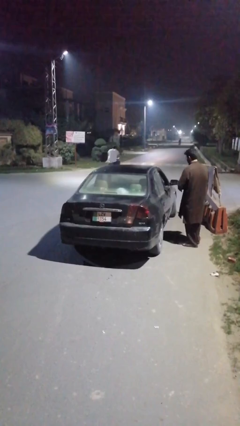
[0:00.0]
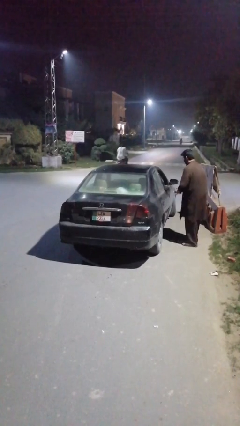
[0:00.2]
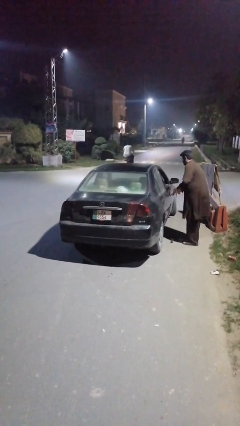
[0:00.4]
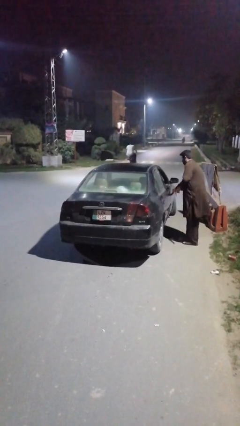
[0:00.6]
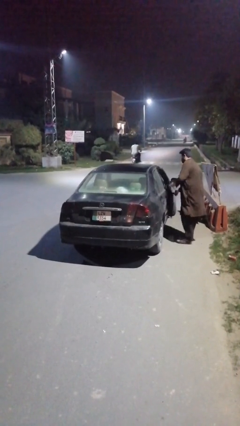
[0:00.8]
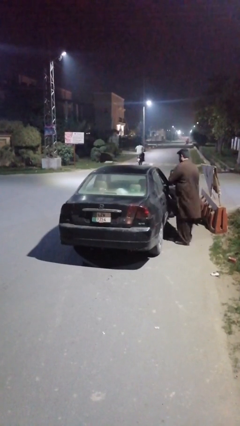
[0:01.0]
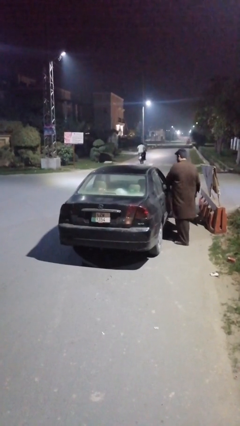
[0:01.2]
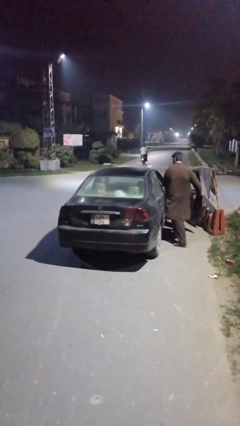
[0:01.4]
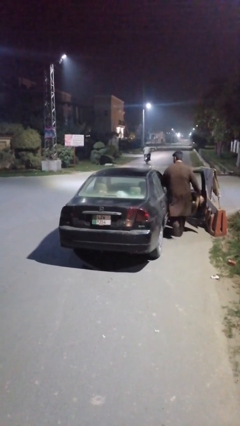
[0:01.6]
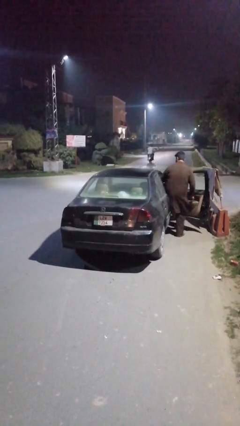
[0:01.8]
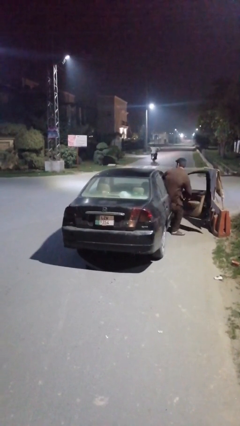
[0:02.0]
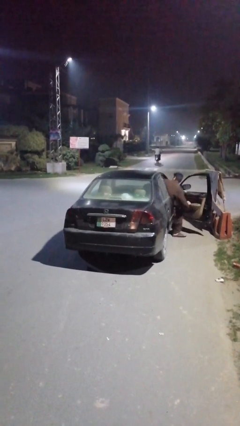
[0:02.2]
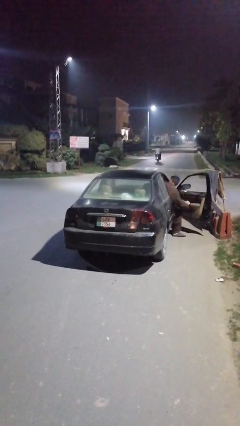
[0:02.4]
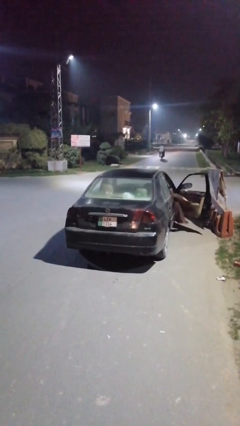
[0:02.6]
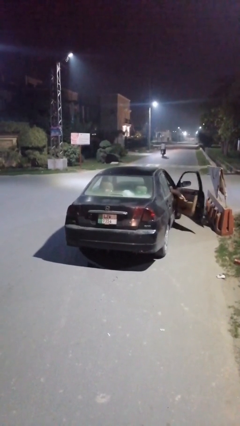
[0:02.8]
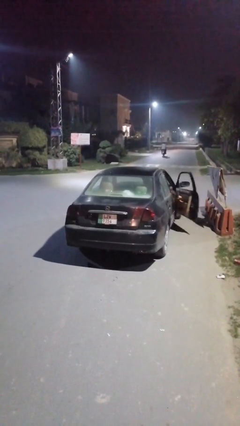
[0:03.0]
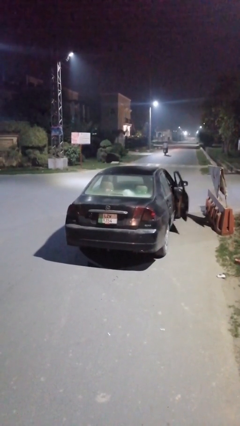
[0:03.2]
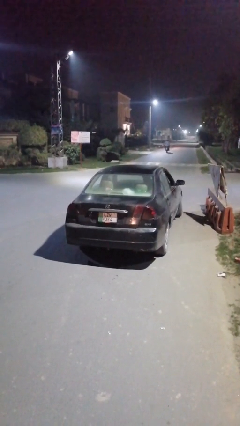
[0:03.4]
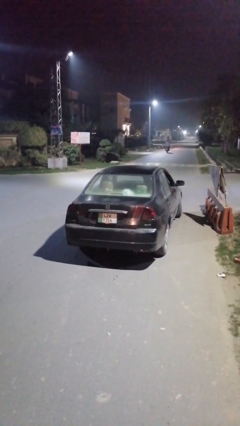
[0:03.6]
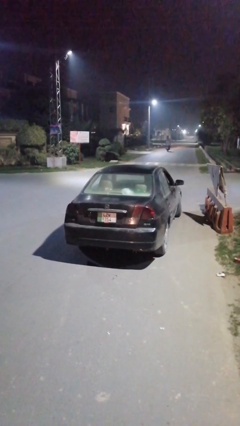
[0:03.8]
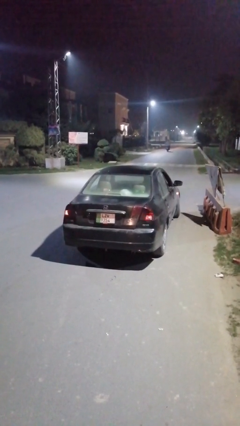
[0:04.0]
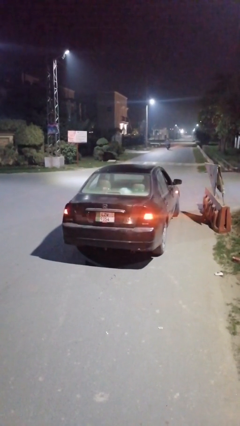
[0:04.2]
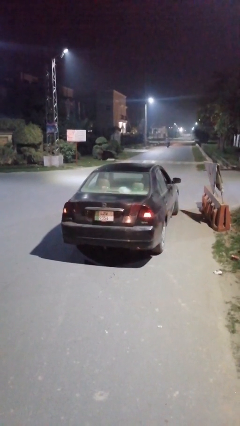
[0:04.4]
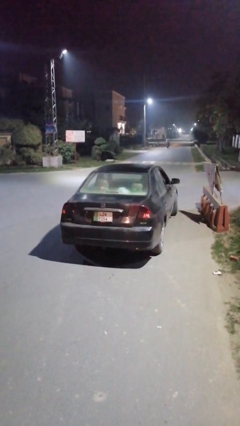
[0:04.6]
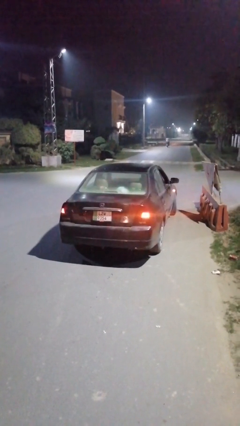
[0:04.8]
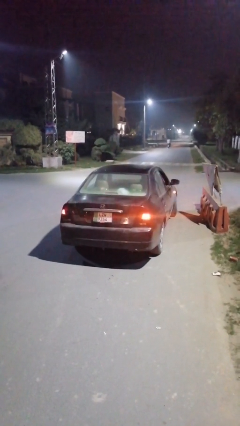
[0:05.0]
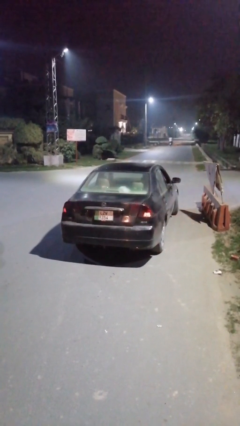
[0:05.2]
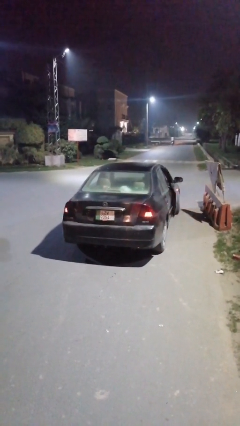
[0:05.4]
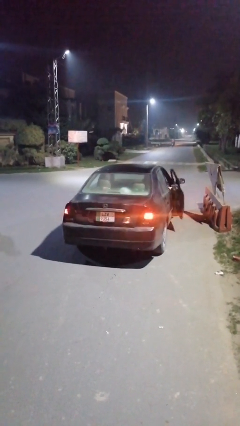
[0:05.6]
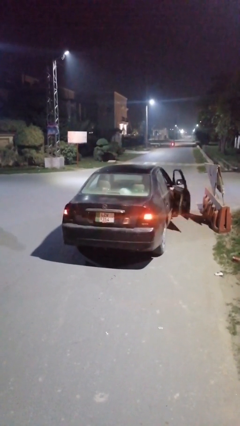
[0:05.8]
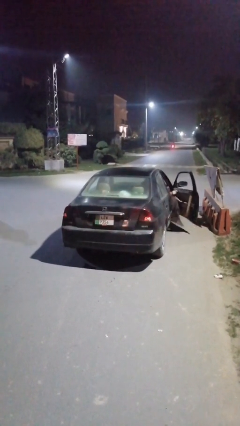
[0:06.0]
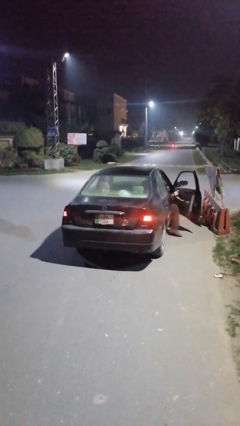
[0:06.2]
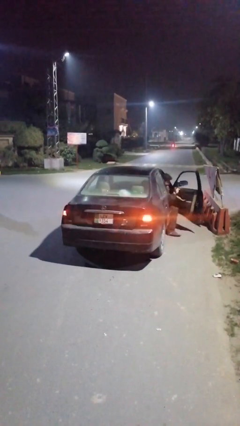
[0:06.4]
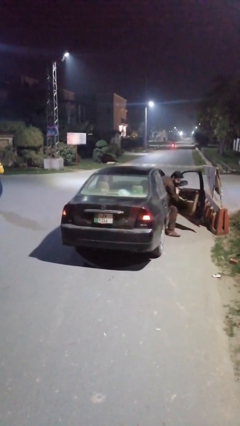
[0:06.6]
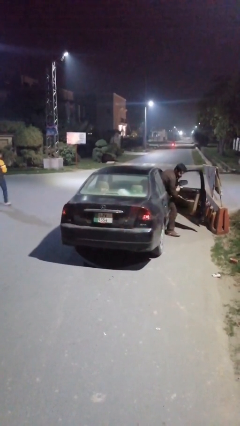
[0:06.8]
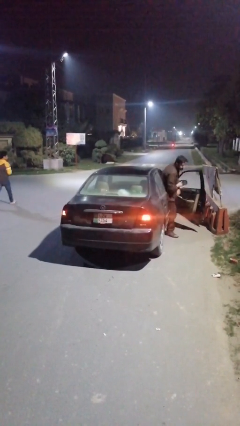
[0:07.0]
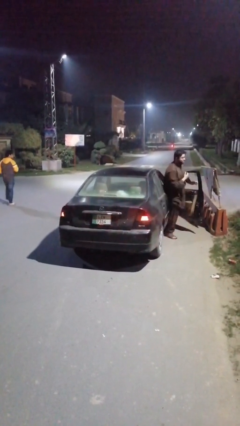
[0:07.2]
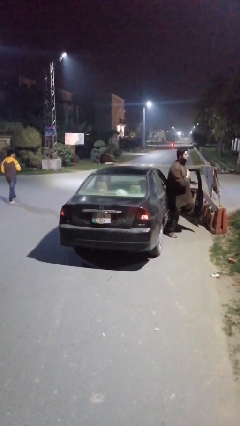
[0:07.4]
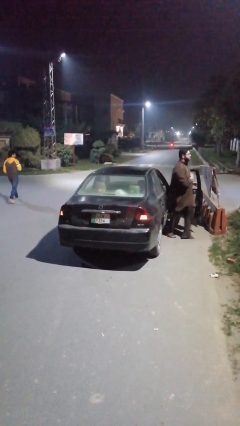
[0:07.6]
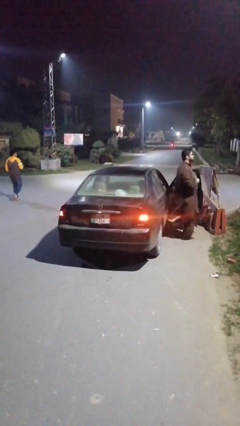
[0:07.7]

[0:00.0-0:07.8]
car picks up person

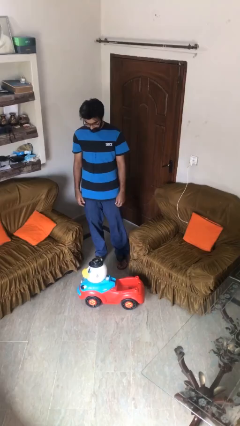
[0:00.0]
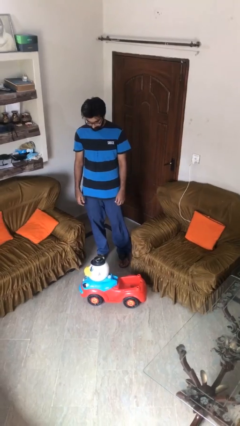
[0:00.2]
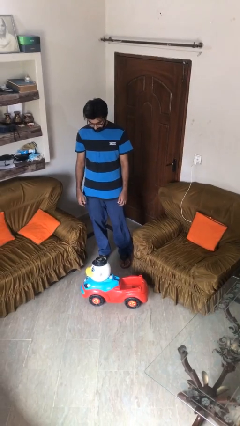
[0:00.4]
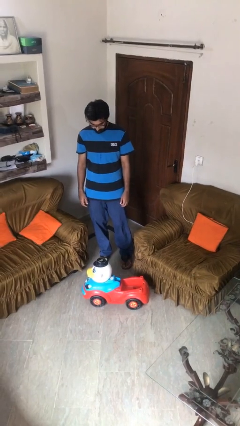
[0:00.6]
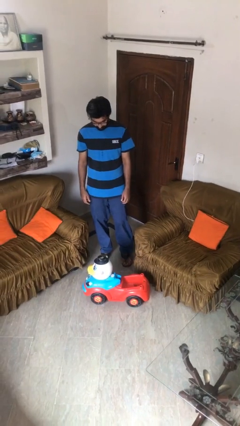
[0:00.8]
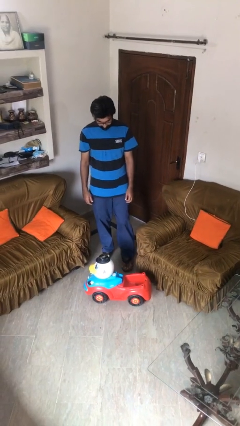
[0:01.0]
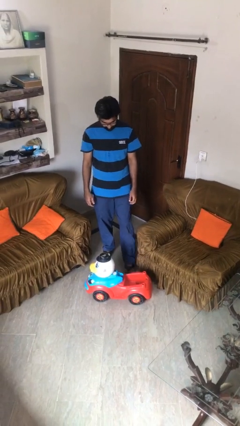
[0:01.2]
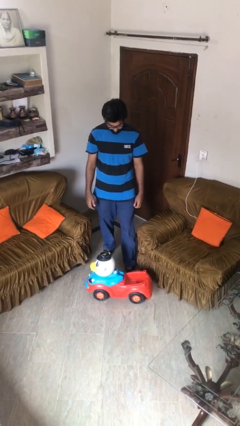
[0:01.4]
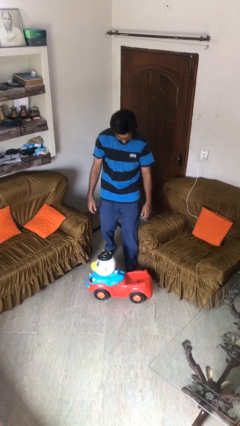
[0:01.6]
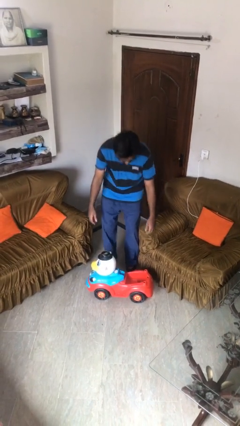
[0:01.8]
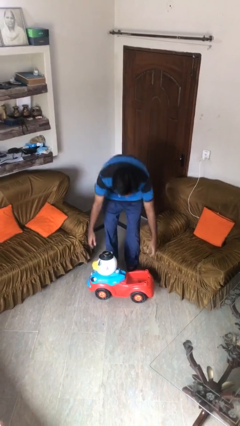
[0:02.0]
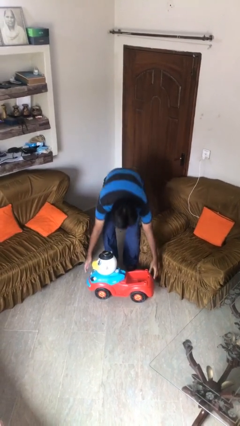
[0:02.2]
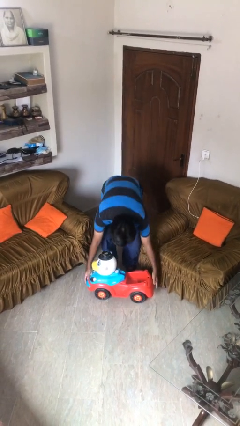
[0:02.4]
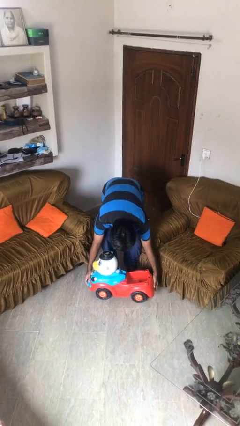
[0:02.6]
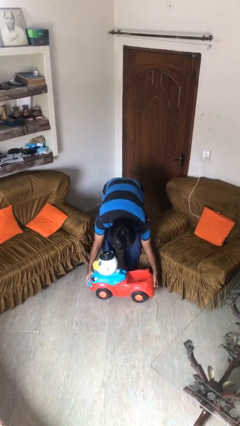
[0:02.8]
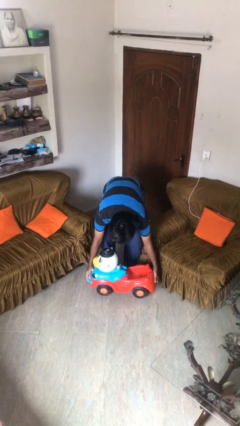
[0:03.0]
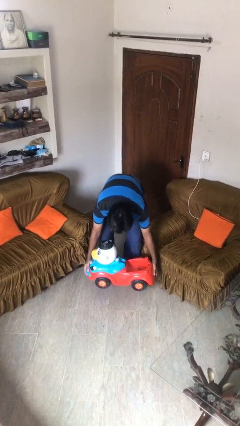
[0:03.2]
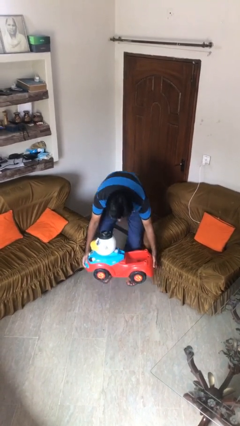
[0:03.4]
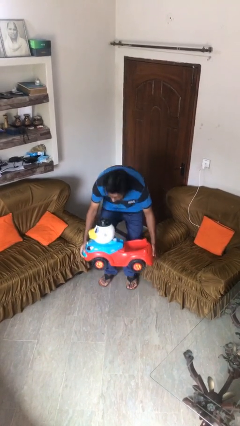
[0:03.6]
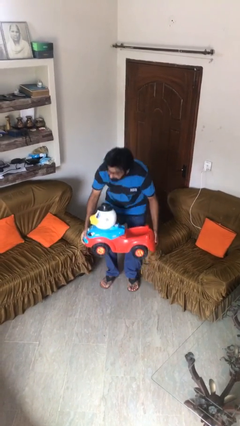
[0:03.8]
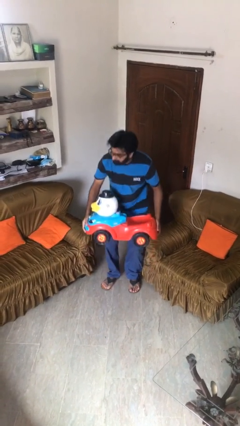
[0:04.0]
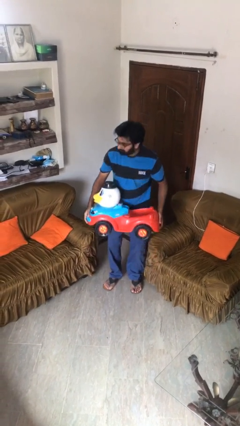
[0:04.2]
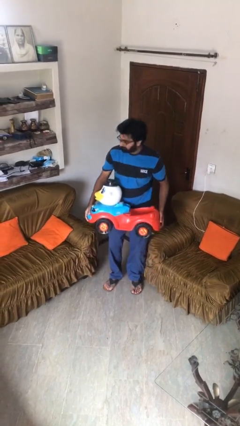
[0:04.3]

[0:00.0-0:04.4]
person picks up object from floor

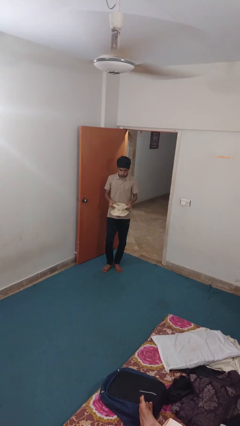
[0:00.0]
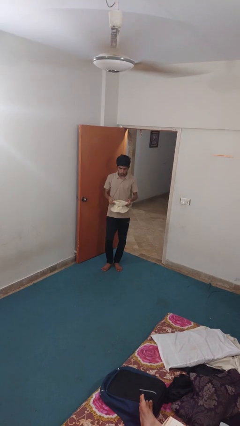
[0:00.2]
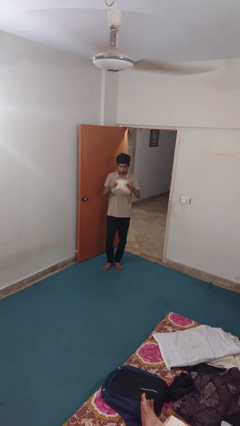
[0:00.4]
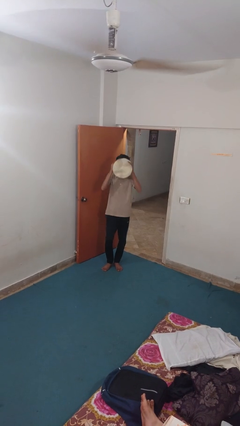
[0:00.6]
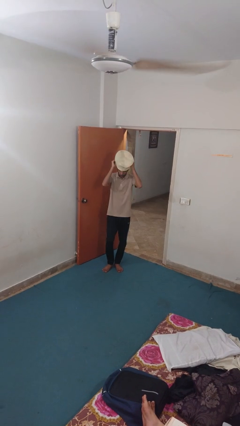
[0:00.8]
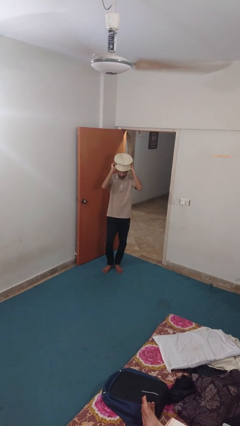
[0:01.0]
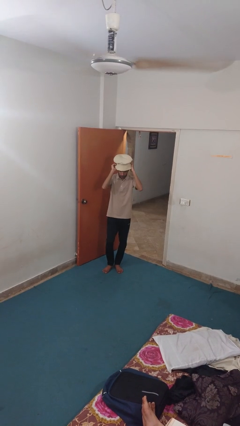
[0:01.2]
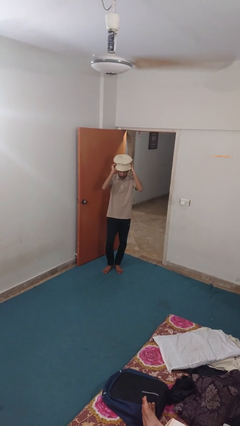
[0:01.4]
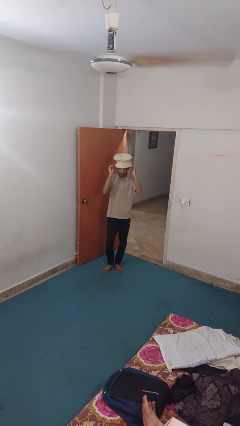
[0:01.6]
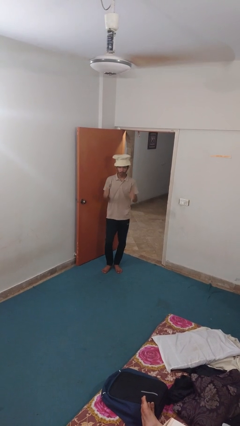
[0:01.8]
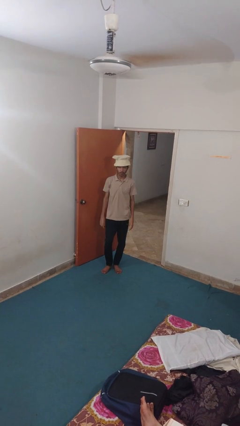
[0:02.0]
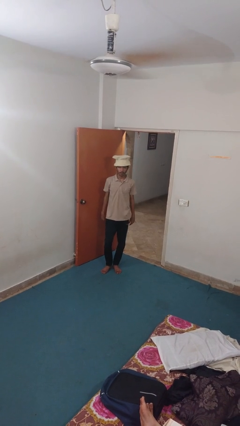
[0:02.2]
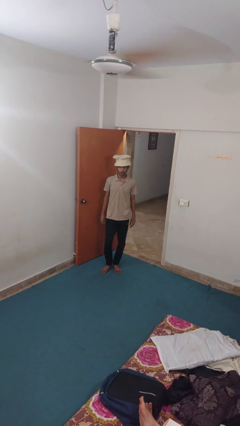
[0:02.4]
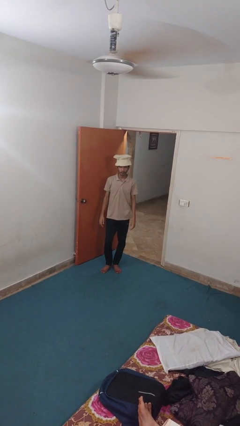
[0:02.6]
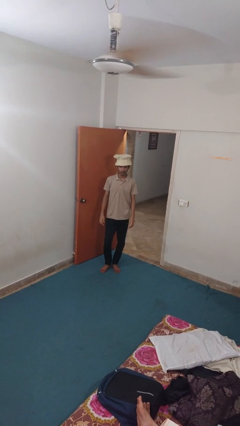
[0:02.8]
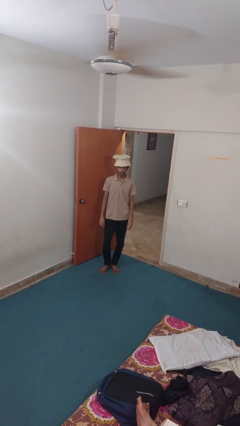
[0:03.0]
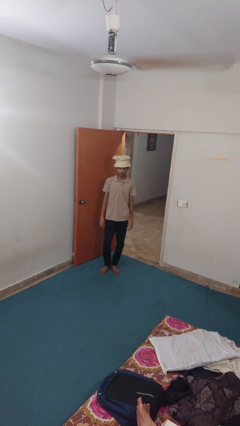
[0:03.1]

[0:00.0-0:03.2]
person puts on hat

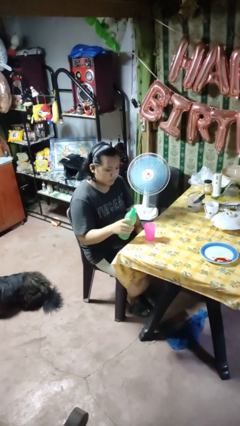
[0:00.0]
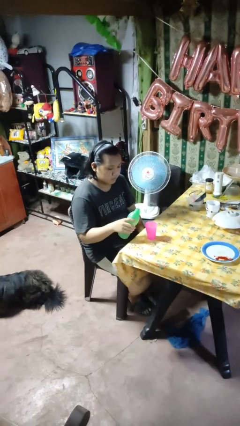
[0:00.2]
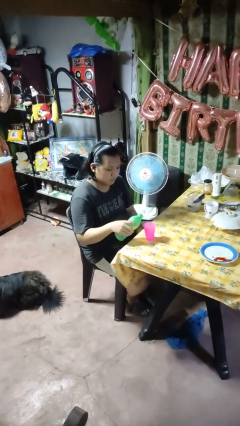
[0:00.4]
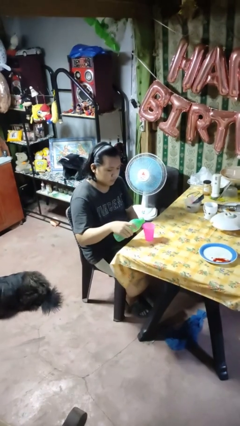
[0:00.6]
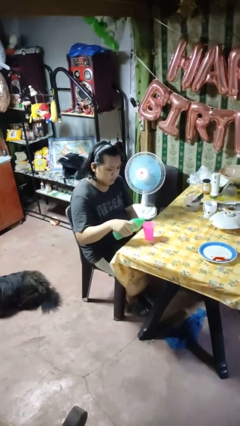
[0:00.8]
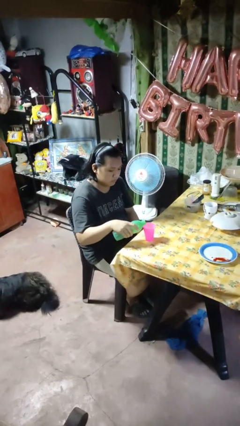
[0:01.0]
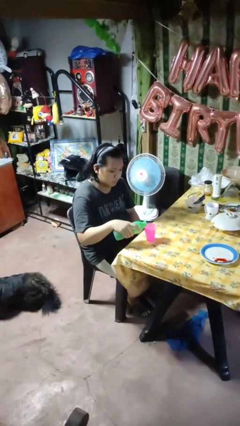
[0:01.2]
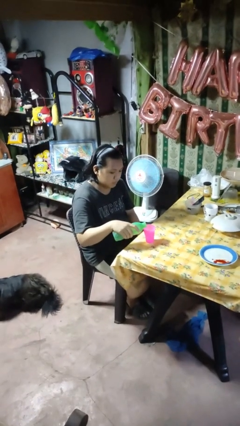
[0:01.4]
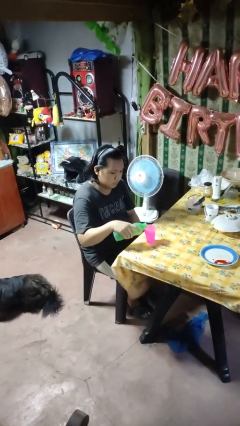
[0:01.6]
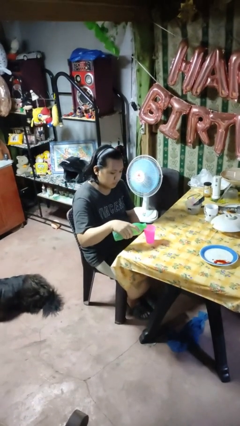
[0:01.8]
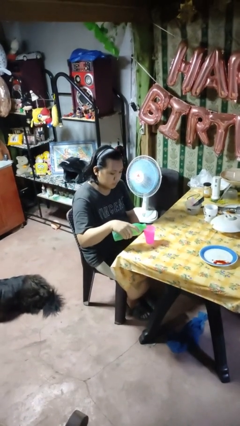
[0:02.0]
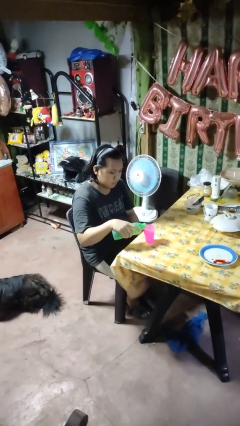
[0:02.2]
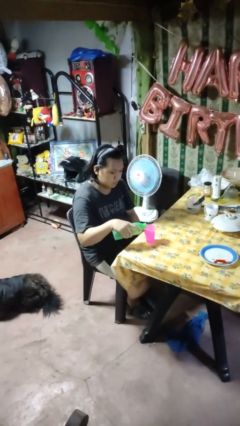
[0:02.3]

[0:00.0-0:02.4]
person pours liquid into cup

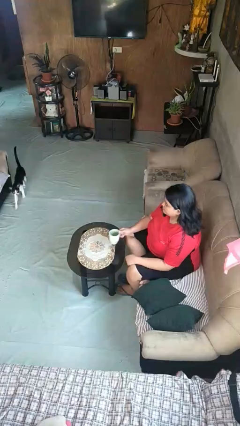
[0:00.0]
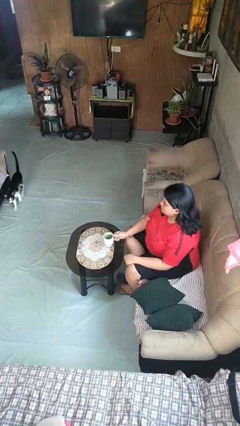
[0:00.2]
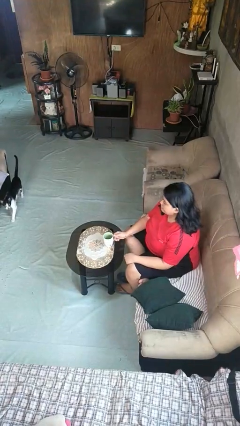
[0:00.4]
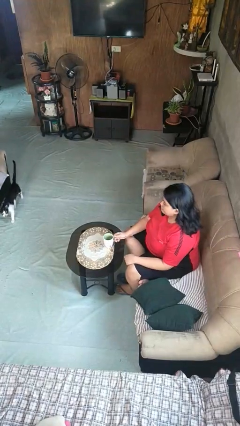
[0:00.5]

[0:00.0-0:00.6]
person puts down object on table
